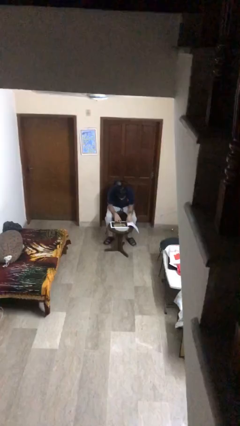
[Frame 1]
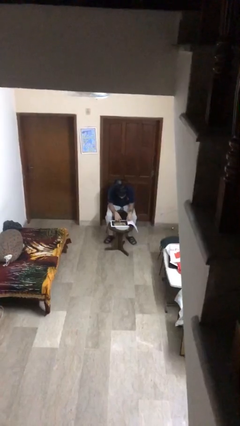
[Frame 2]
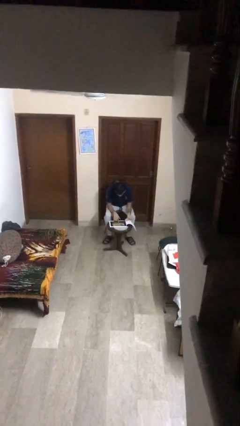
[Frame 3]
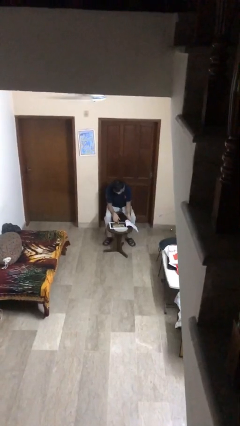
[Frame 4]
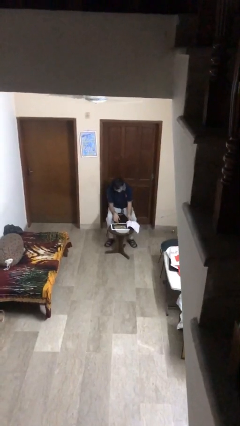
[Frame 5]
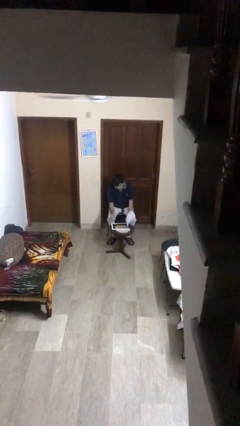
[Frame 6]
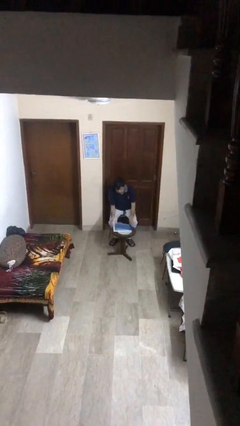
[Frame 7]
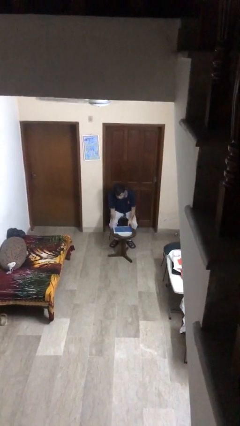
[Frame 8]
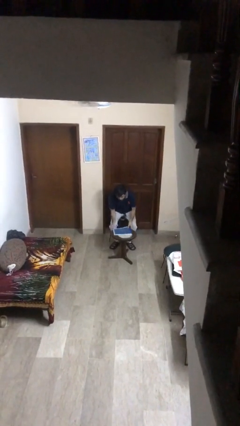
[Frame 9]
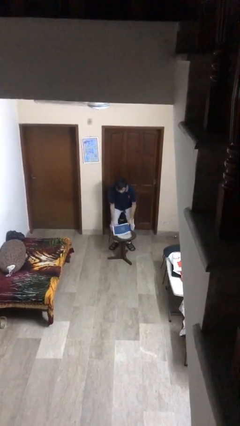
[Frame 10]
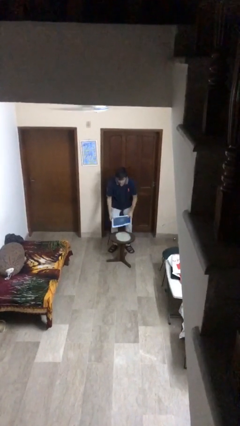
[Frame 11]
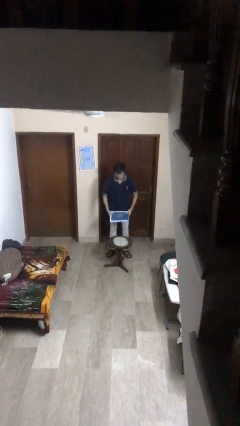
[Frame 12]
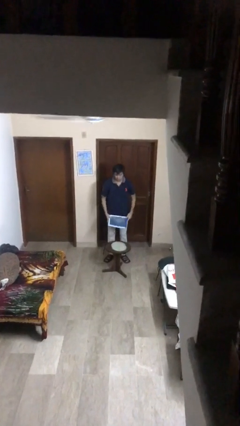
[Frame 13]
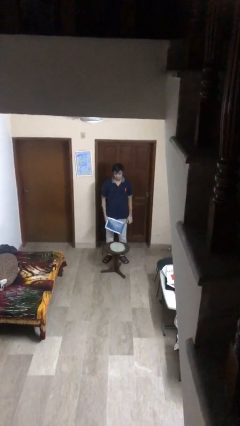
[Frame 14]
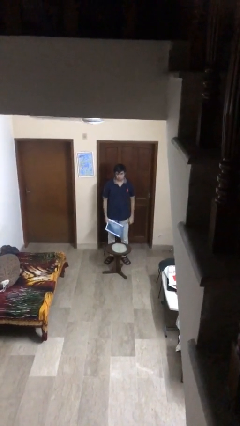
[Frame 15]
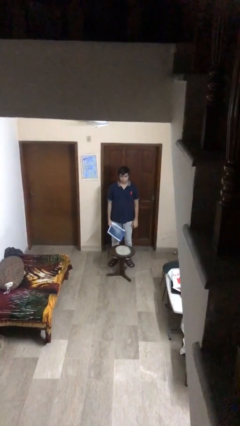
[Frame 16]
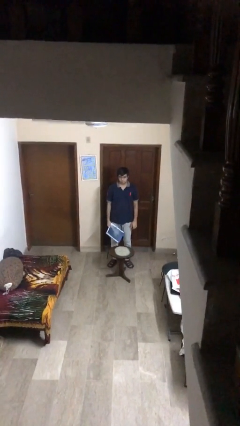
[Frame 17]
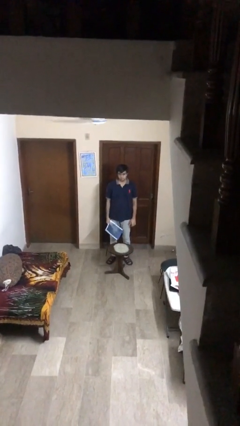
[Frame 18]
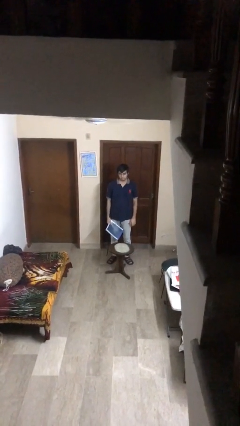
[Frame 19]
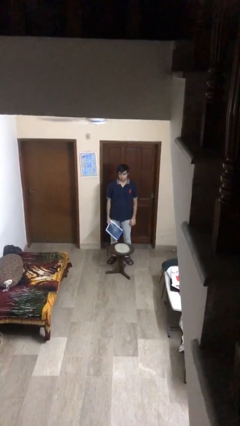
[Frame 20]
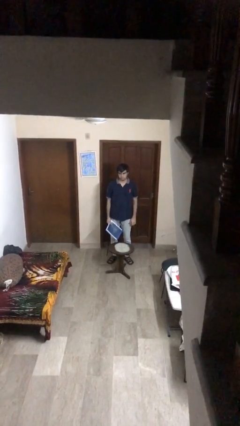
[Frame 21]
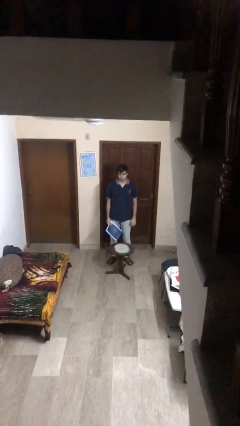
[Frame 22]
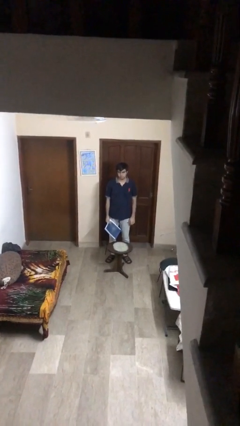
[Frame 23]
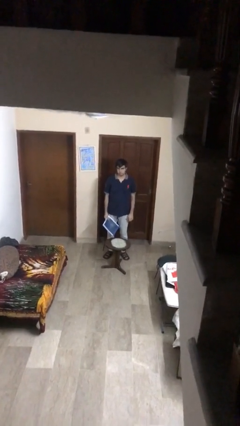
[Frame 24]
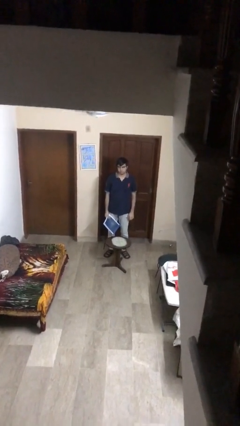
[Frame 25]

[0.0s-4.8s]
person stands up

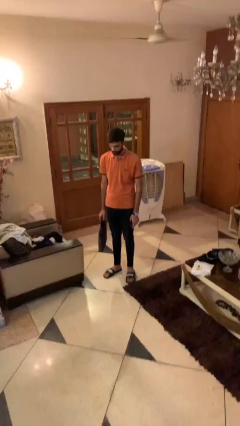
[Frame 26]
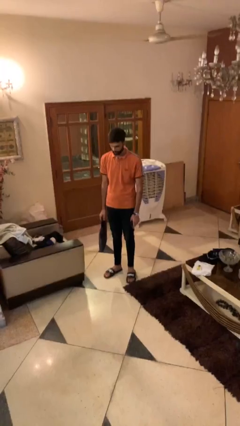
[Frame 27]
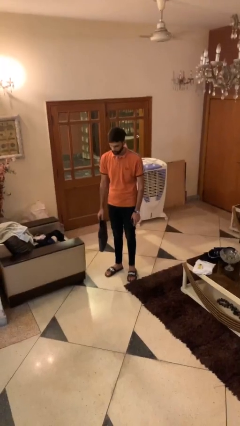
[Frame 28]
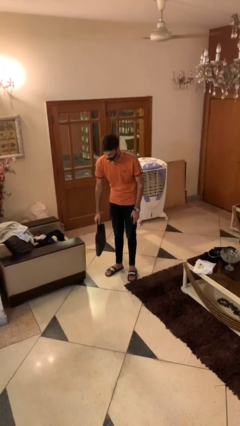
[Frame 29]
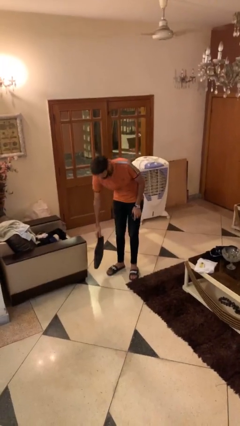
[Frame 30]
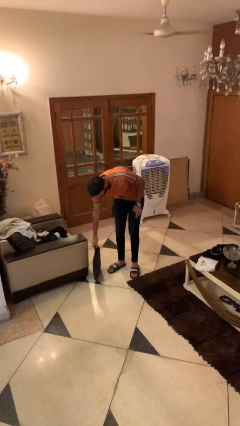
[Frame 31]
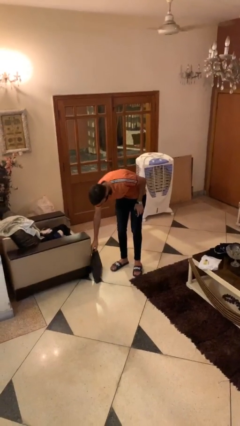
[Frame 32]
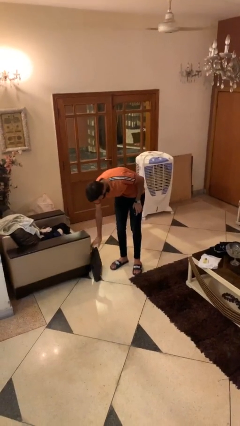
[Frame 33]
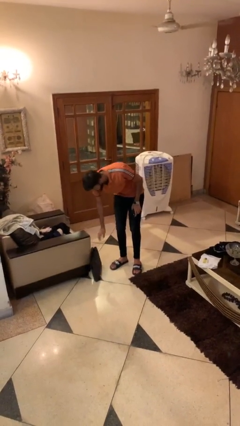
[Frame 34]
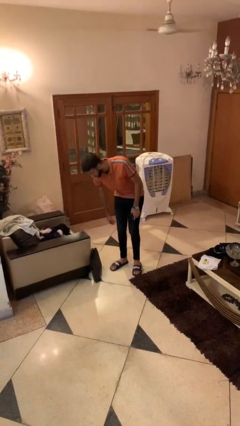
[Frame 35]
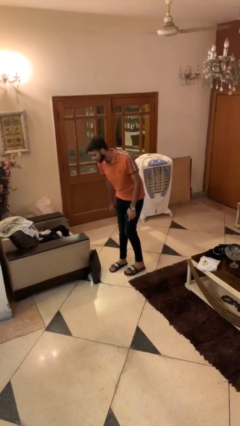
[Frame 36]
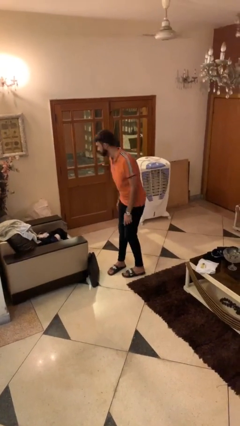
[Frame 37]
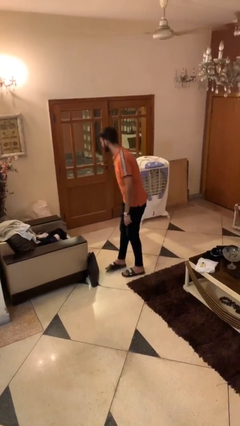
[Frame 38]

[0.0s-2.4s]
person puts down object on table

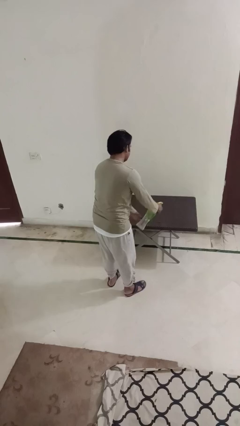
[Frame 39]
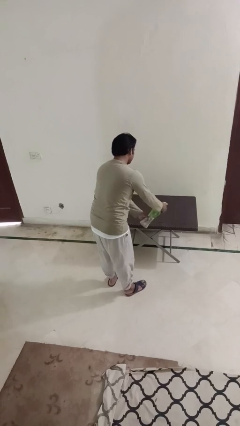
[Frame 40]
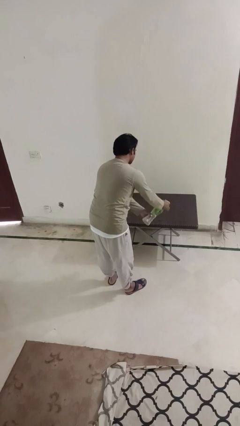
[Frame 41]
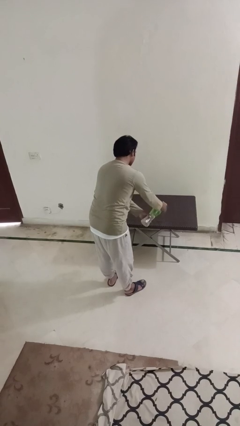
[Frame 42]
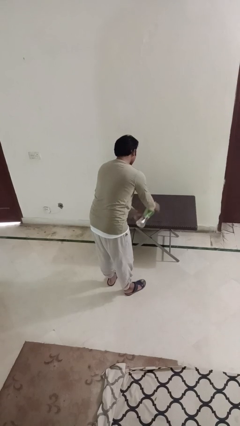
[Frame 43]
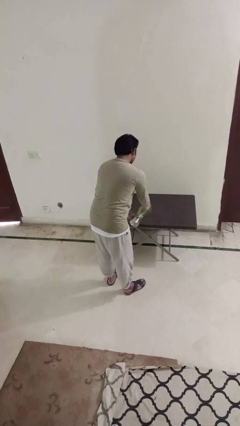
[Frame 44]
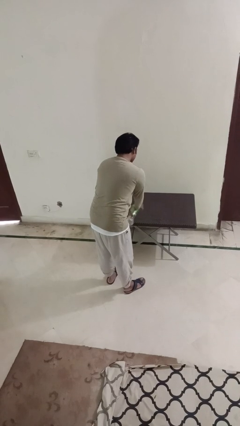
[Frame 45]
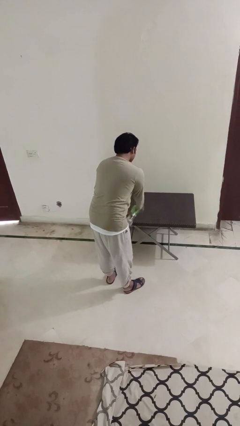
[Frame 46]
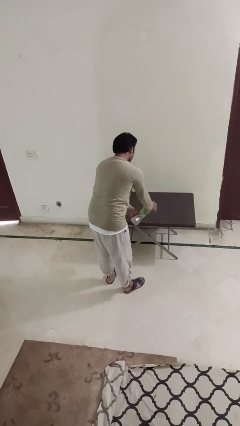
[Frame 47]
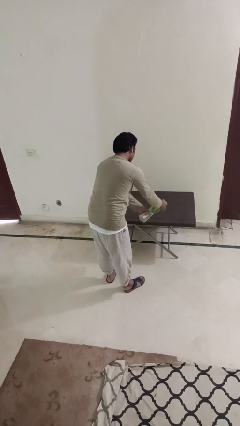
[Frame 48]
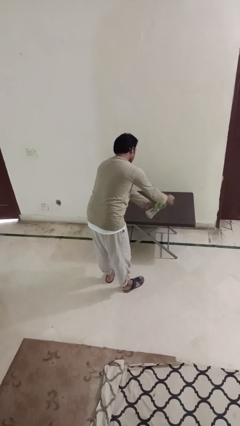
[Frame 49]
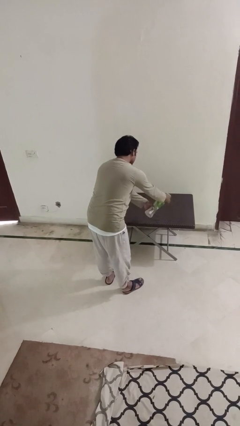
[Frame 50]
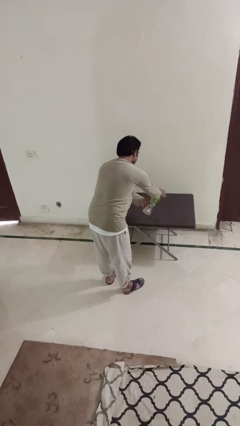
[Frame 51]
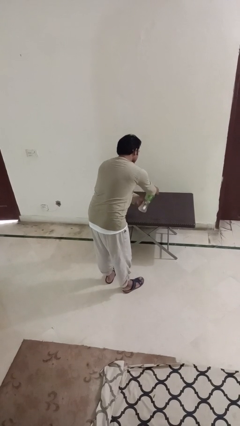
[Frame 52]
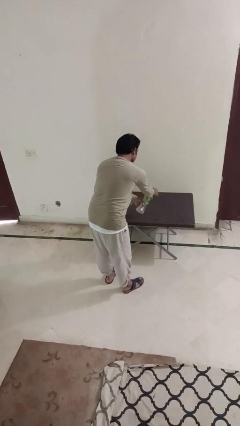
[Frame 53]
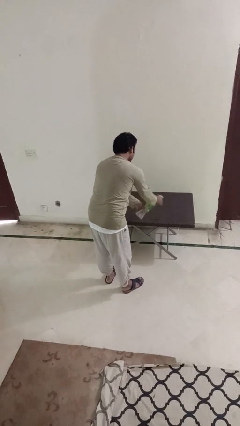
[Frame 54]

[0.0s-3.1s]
person sprays from bottle

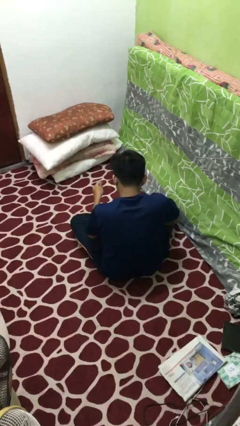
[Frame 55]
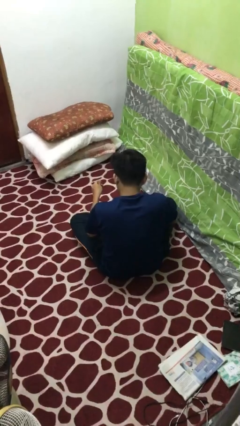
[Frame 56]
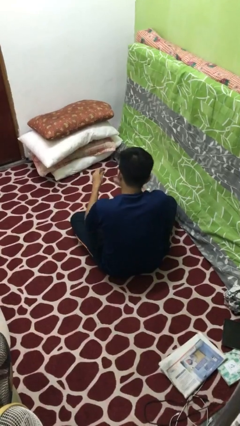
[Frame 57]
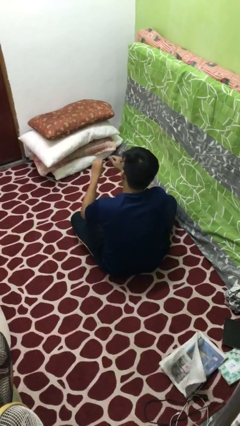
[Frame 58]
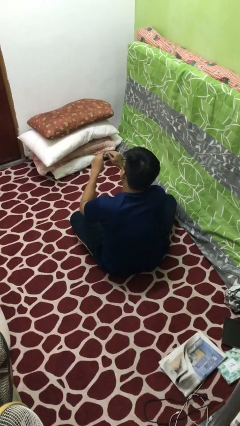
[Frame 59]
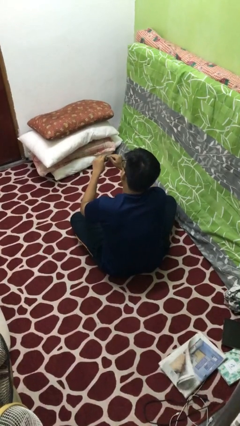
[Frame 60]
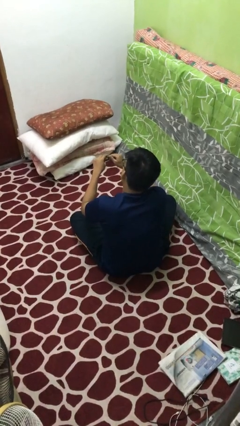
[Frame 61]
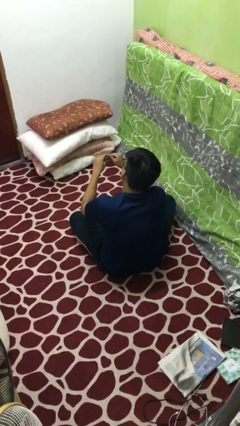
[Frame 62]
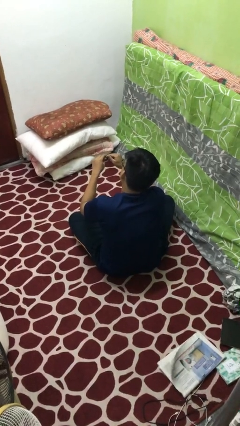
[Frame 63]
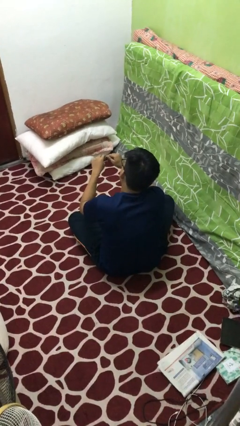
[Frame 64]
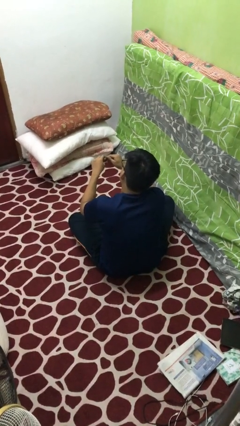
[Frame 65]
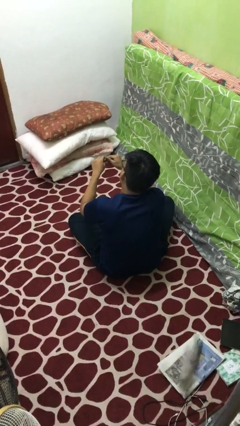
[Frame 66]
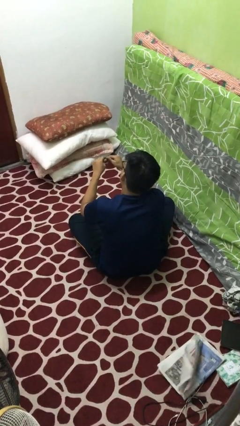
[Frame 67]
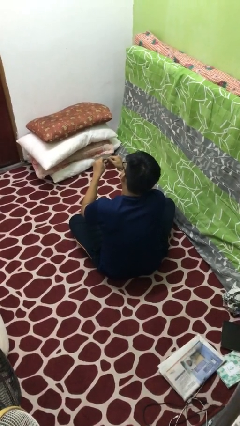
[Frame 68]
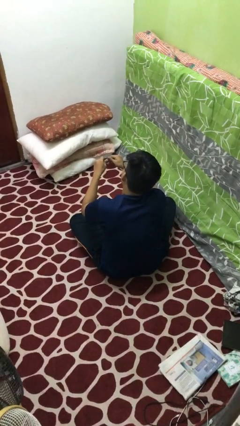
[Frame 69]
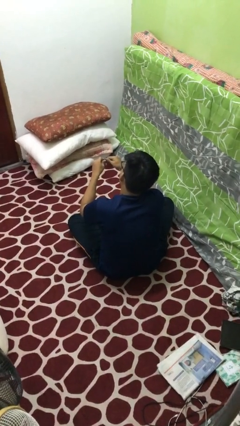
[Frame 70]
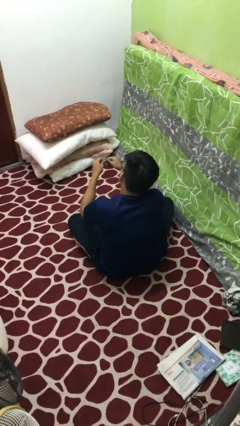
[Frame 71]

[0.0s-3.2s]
person clips fingernails

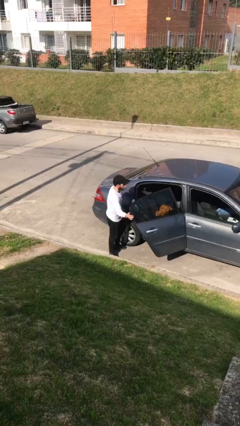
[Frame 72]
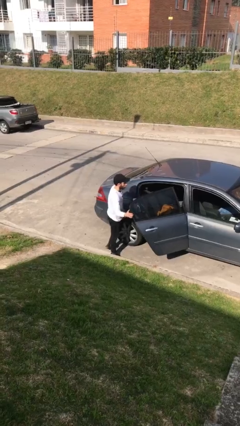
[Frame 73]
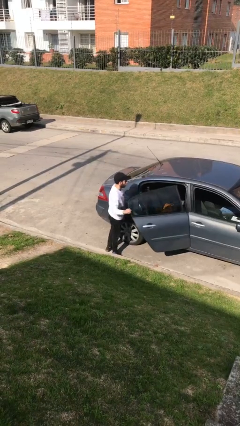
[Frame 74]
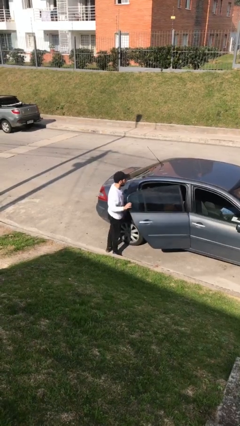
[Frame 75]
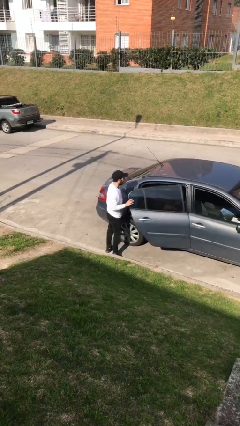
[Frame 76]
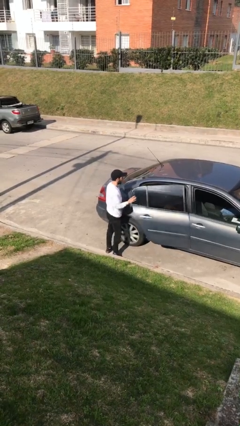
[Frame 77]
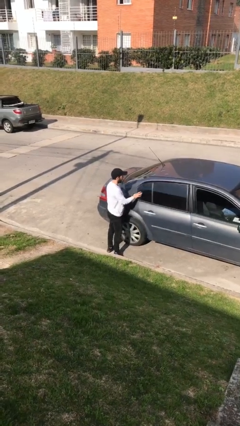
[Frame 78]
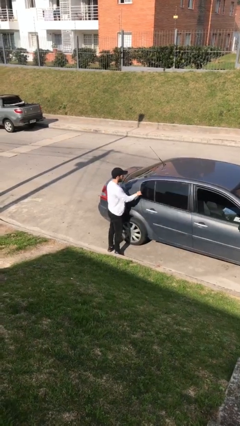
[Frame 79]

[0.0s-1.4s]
person closes car door

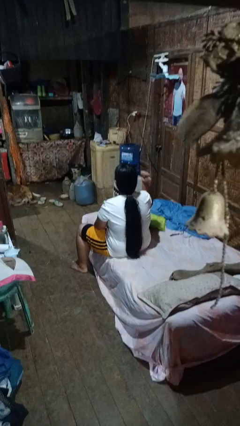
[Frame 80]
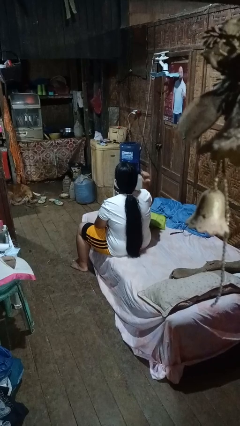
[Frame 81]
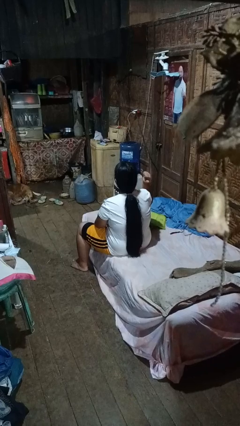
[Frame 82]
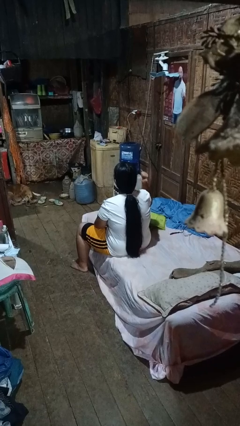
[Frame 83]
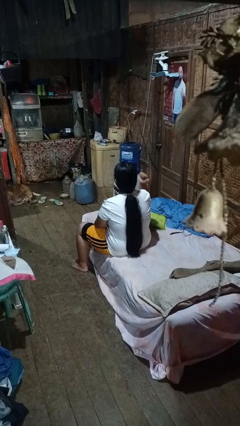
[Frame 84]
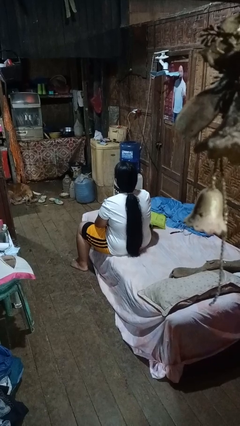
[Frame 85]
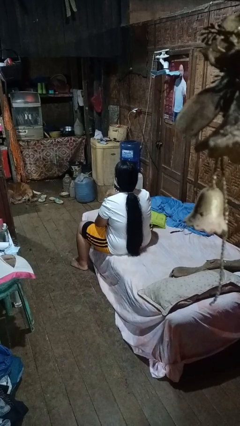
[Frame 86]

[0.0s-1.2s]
person gestures behind me

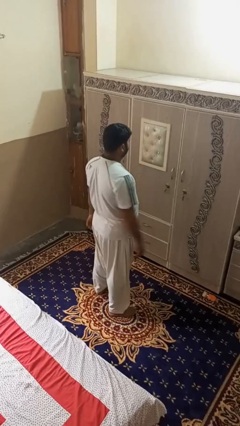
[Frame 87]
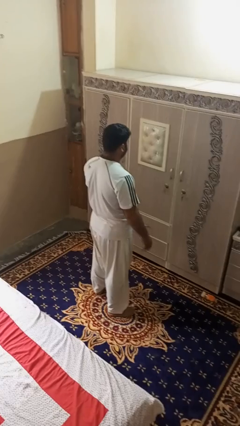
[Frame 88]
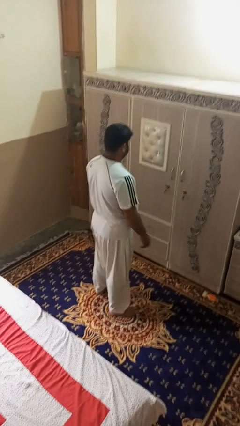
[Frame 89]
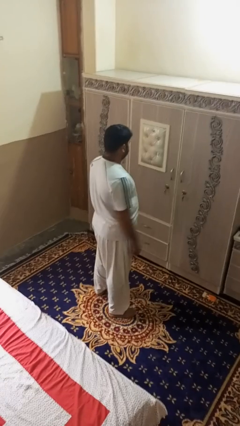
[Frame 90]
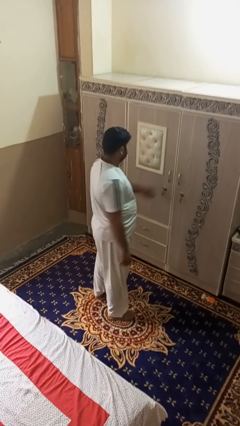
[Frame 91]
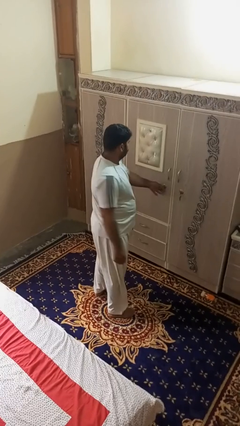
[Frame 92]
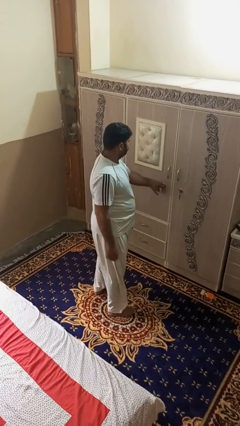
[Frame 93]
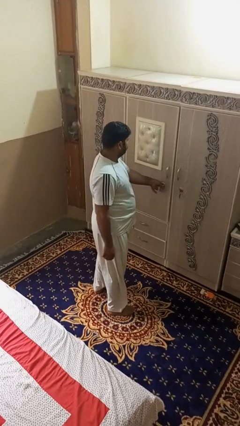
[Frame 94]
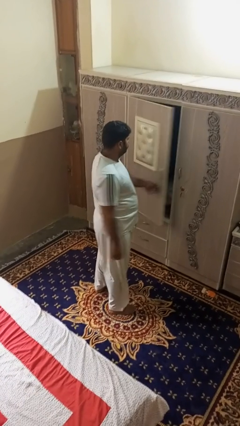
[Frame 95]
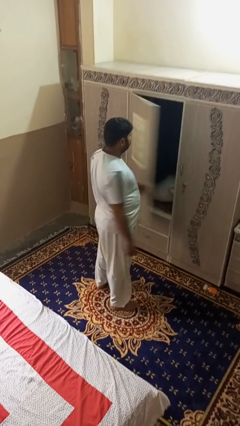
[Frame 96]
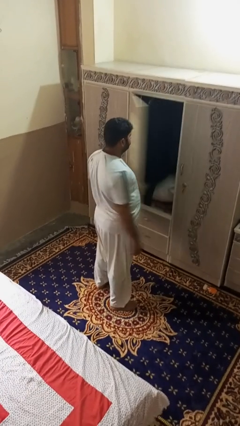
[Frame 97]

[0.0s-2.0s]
person opens dresser drawer
